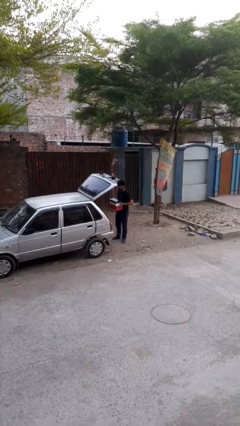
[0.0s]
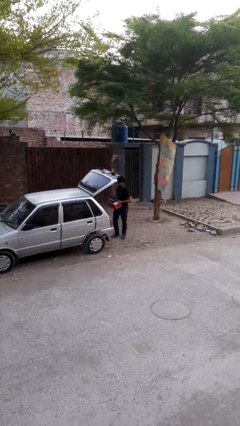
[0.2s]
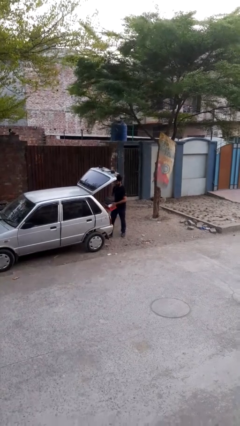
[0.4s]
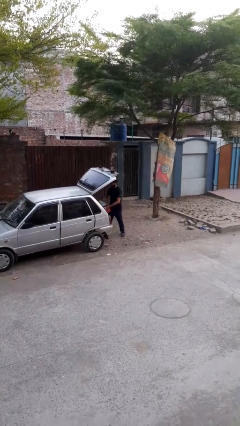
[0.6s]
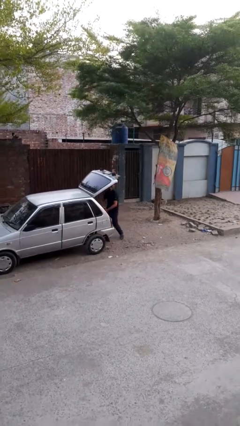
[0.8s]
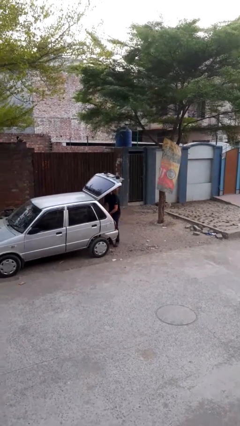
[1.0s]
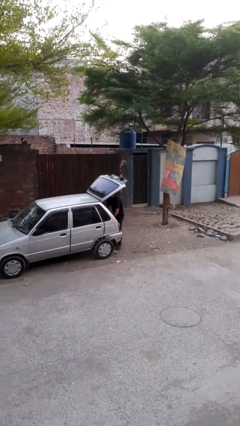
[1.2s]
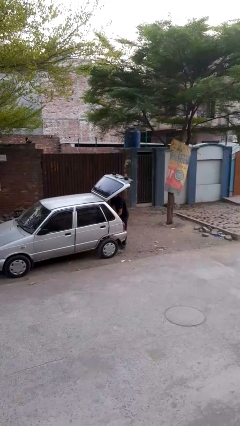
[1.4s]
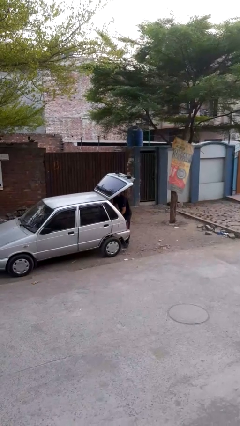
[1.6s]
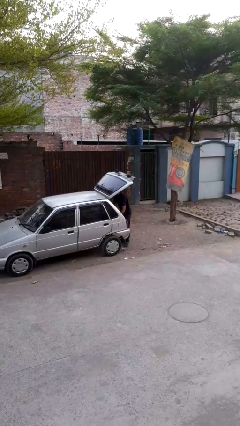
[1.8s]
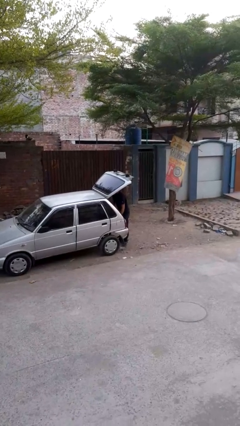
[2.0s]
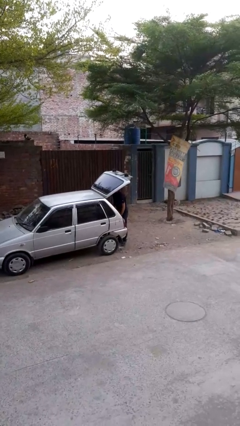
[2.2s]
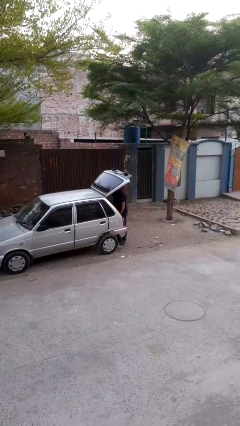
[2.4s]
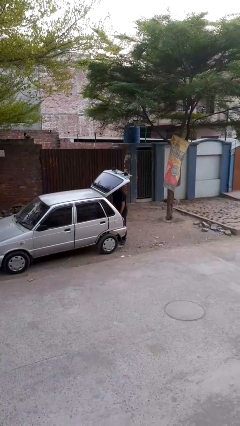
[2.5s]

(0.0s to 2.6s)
person loads car

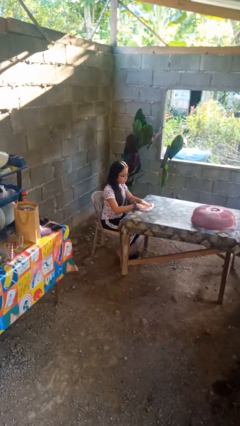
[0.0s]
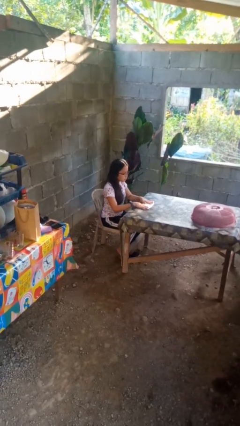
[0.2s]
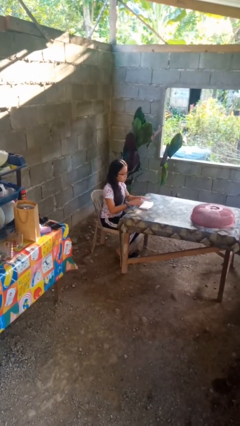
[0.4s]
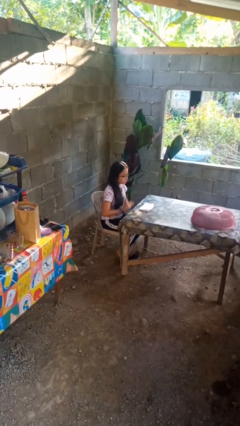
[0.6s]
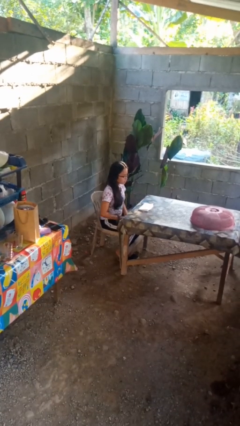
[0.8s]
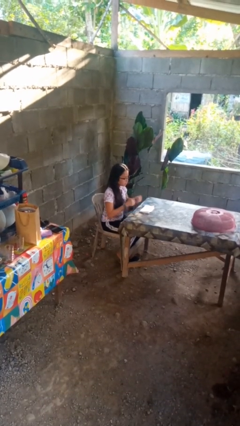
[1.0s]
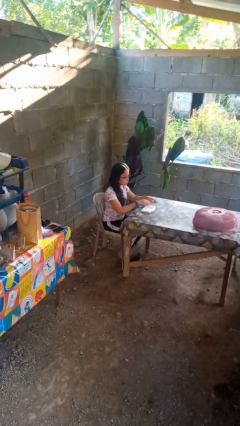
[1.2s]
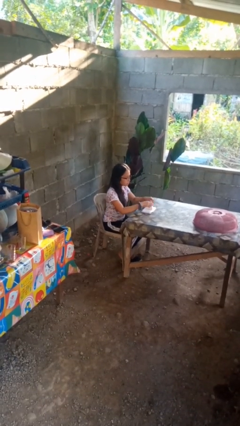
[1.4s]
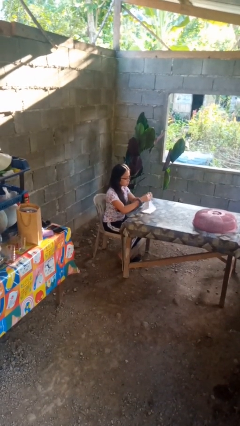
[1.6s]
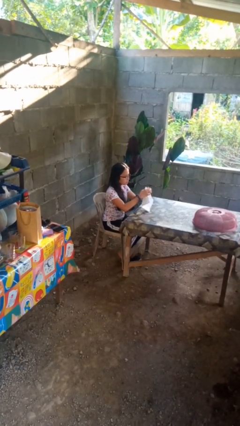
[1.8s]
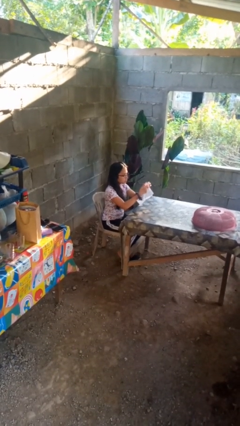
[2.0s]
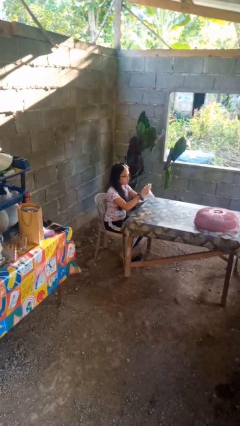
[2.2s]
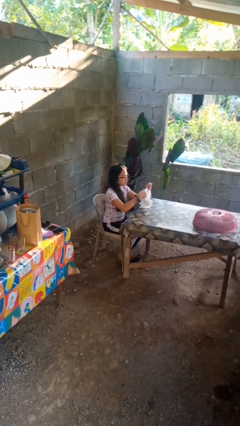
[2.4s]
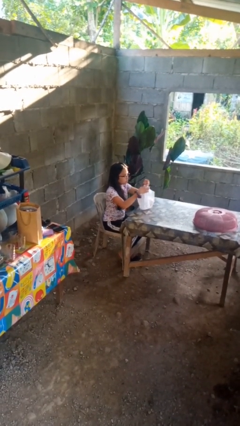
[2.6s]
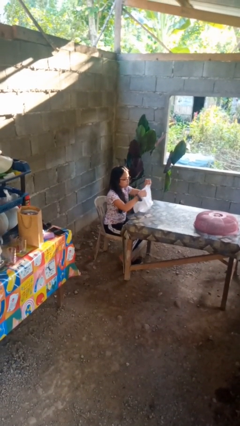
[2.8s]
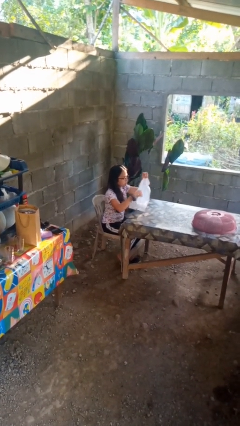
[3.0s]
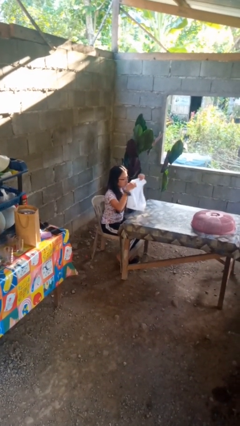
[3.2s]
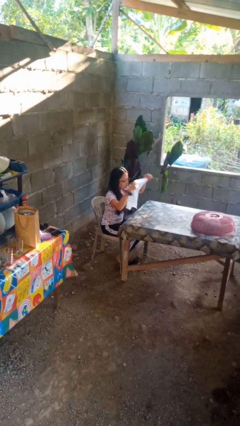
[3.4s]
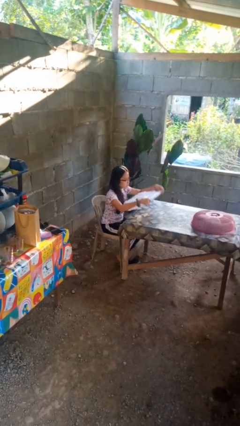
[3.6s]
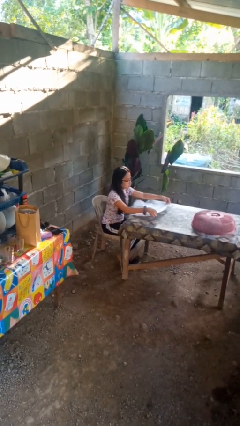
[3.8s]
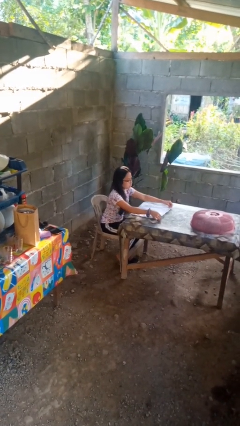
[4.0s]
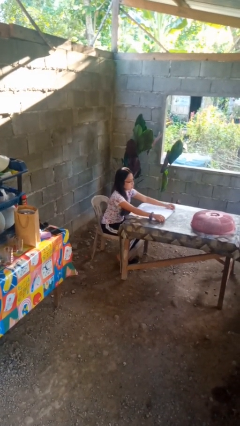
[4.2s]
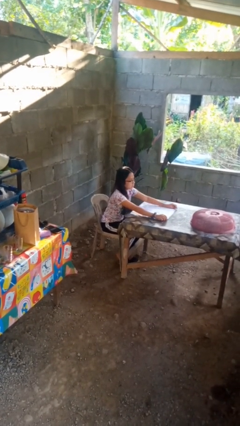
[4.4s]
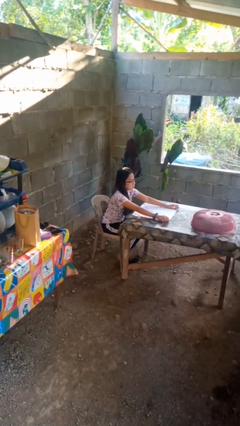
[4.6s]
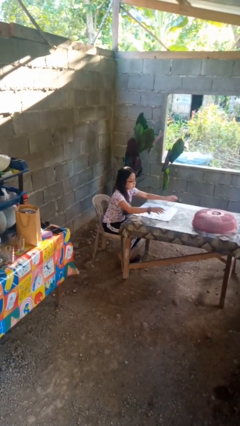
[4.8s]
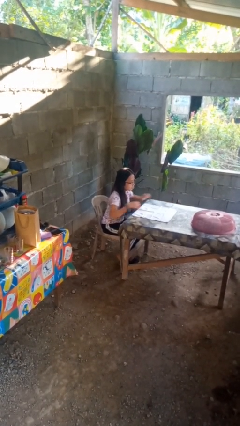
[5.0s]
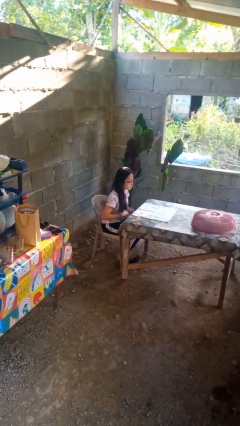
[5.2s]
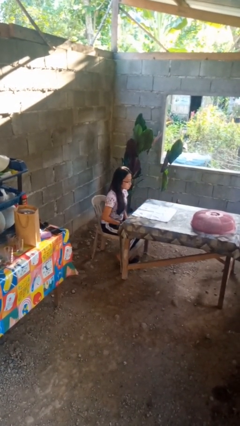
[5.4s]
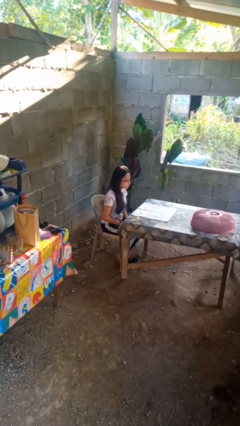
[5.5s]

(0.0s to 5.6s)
person spreads tablecloth

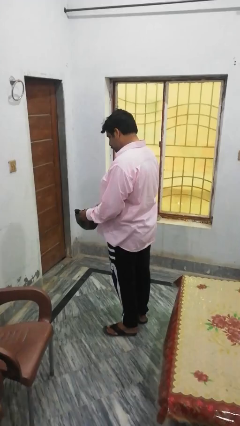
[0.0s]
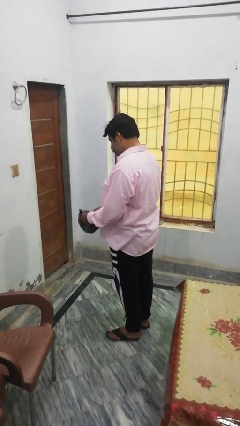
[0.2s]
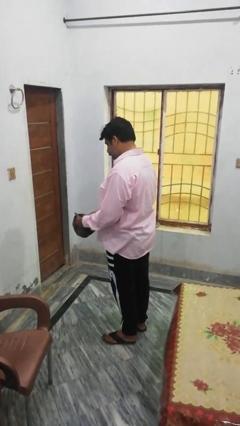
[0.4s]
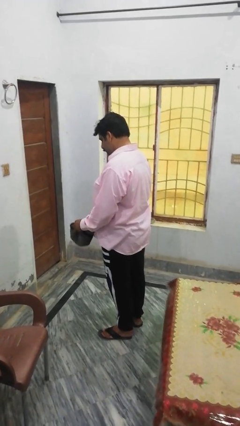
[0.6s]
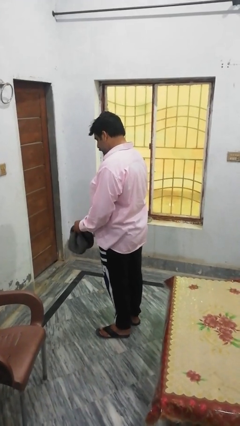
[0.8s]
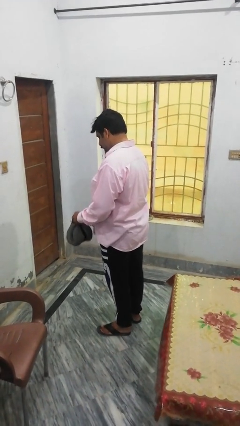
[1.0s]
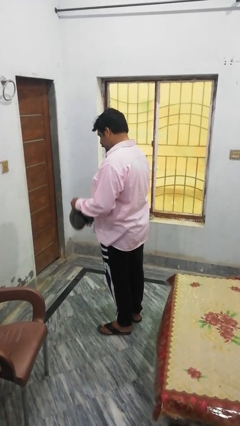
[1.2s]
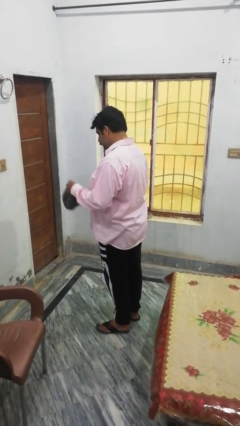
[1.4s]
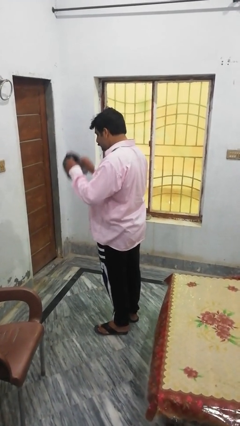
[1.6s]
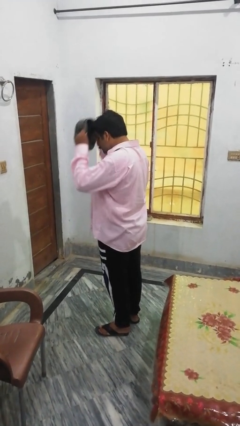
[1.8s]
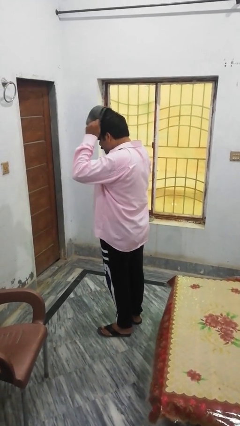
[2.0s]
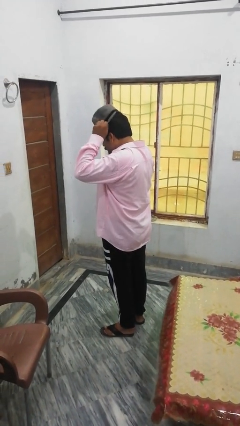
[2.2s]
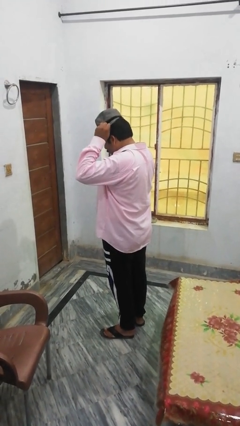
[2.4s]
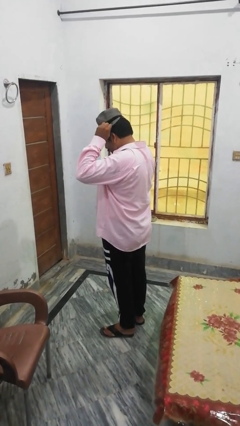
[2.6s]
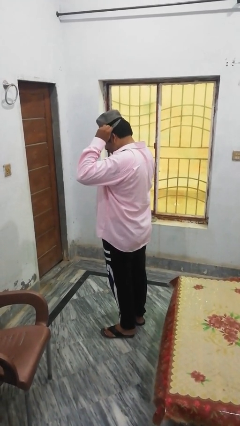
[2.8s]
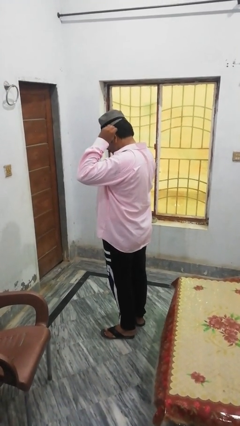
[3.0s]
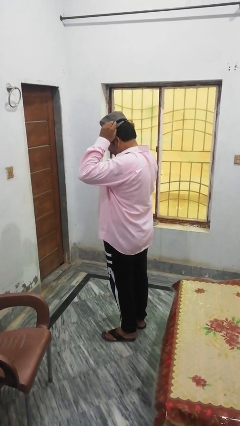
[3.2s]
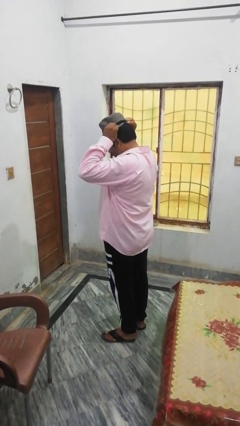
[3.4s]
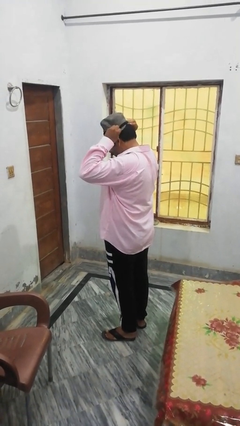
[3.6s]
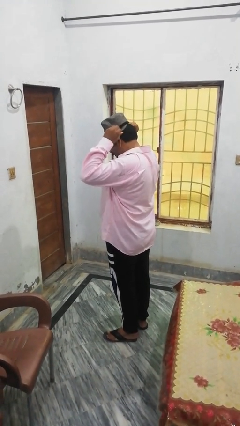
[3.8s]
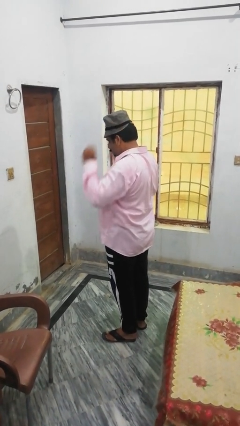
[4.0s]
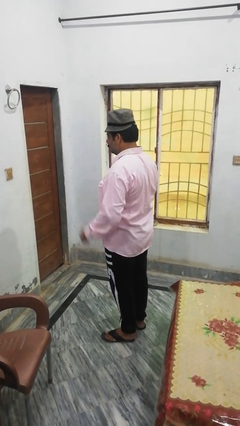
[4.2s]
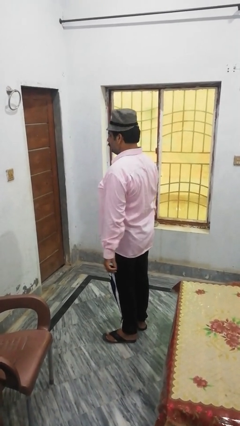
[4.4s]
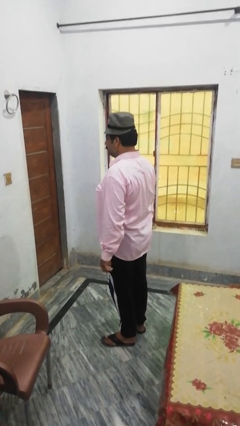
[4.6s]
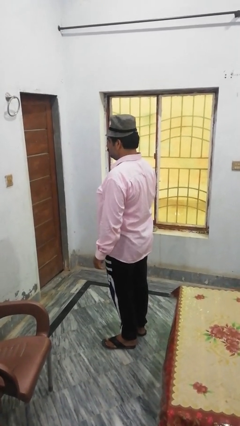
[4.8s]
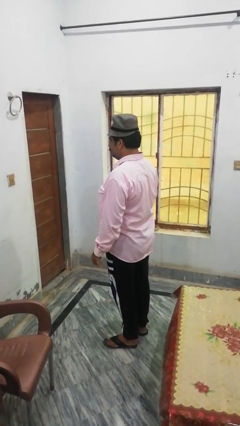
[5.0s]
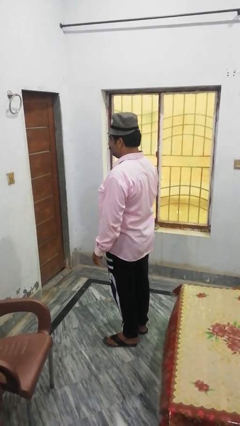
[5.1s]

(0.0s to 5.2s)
person puts on hat

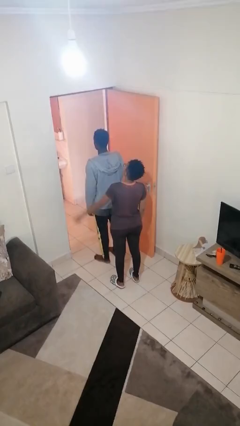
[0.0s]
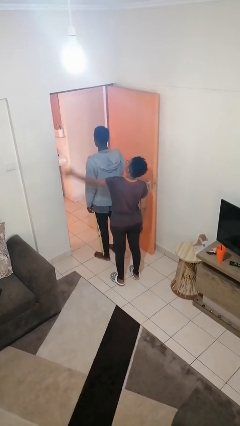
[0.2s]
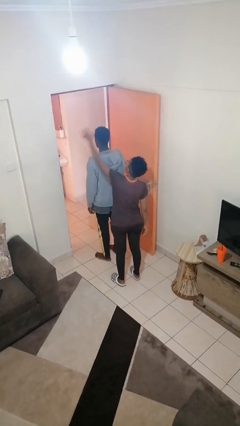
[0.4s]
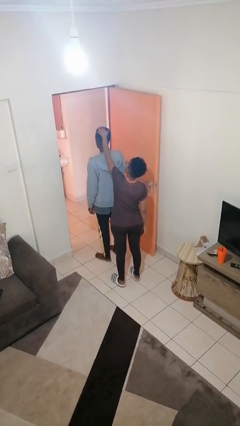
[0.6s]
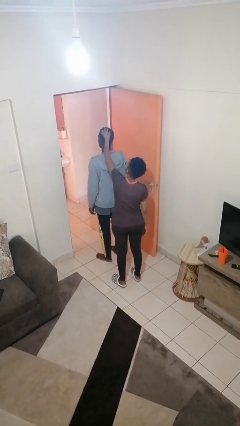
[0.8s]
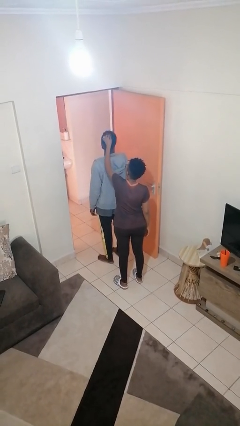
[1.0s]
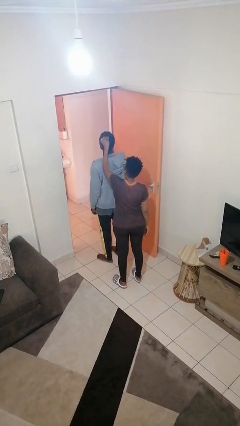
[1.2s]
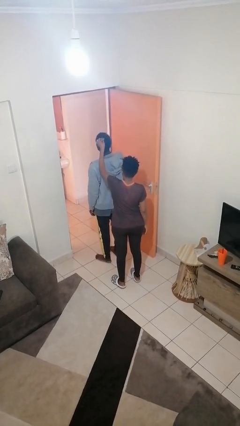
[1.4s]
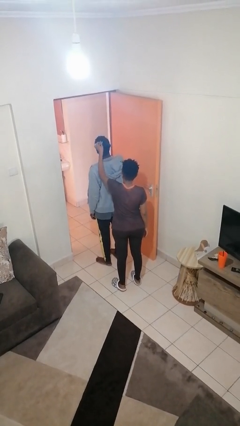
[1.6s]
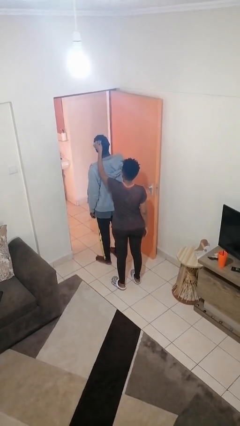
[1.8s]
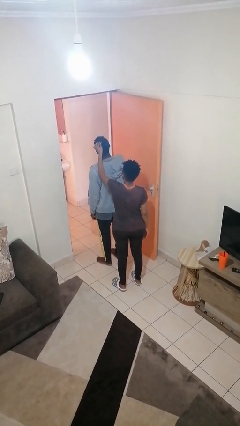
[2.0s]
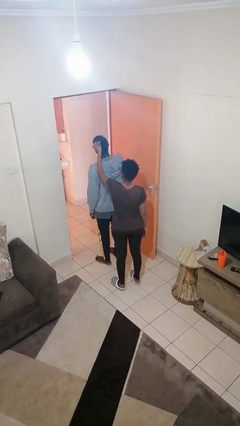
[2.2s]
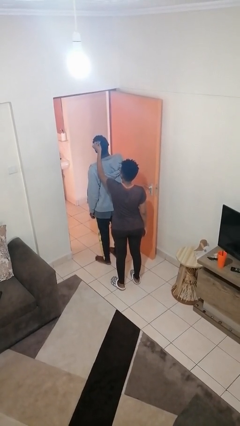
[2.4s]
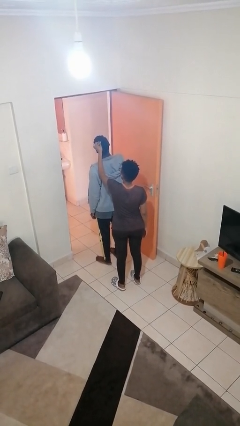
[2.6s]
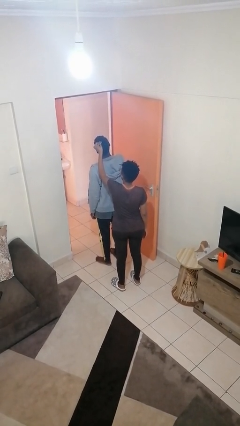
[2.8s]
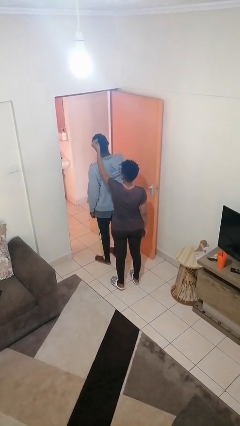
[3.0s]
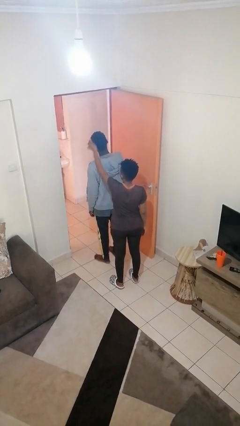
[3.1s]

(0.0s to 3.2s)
person grabs person by hair

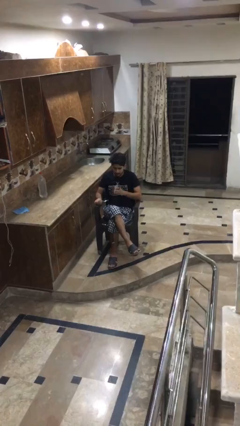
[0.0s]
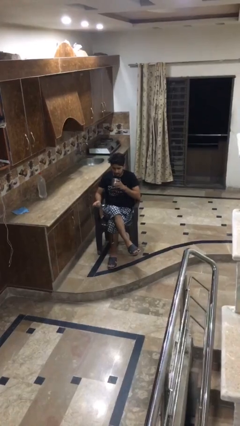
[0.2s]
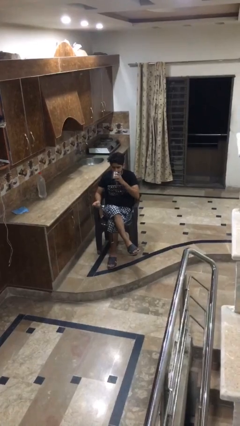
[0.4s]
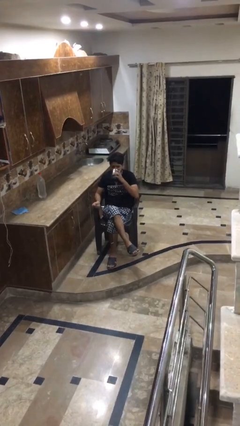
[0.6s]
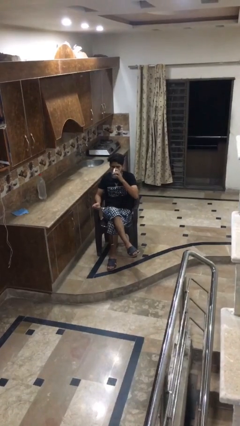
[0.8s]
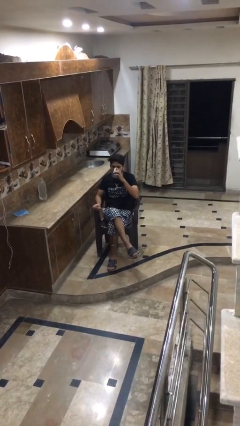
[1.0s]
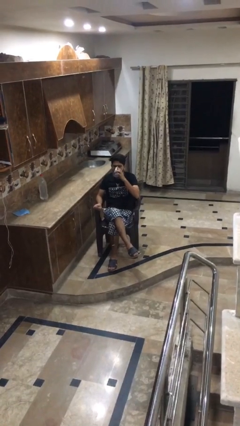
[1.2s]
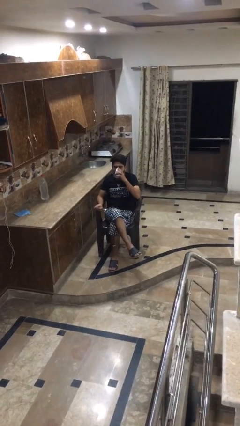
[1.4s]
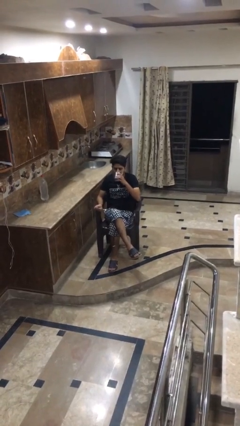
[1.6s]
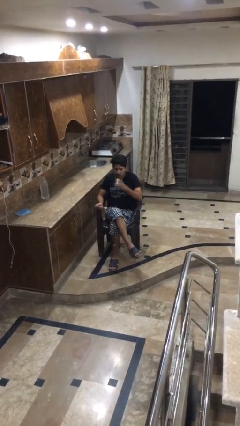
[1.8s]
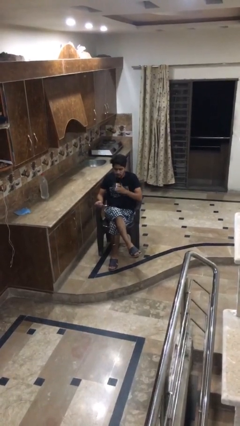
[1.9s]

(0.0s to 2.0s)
person drinks from mug
